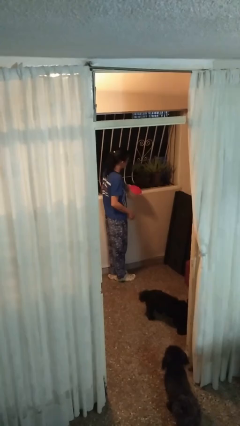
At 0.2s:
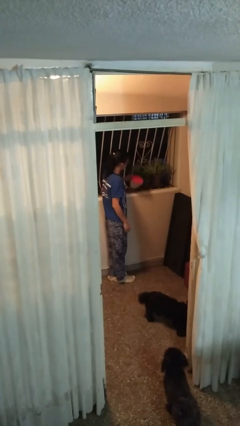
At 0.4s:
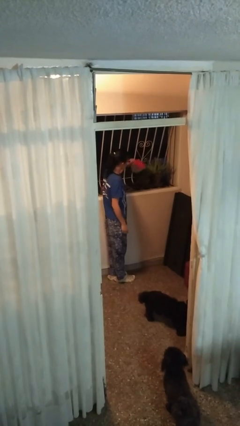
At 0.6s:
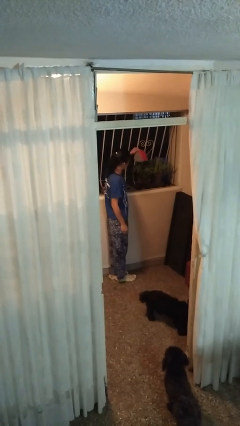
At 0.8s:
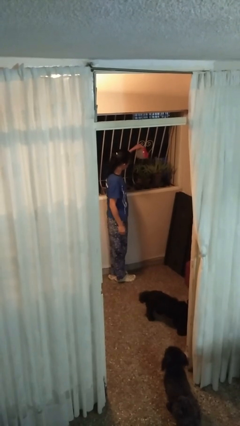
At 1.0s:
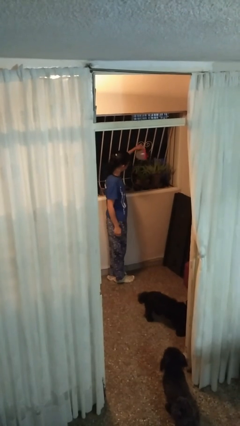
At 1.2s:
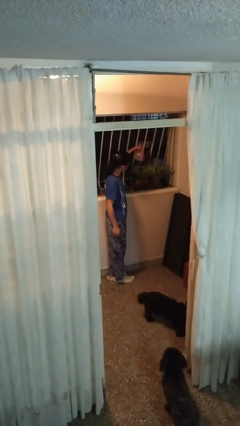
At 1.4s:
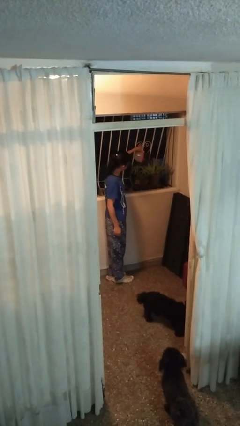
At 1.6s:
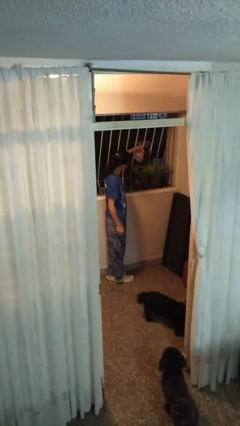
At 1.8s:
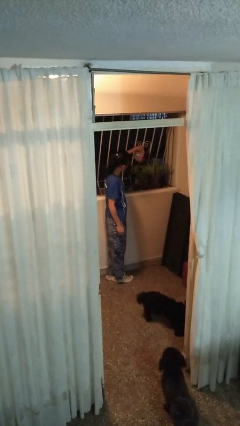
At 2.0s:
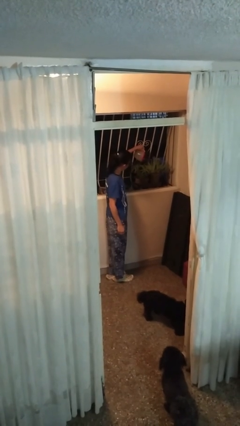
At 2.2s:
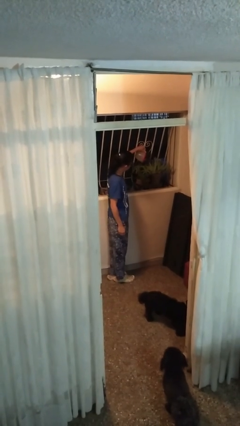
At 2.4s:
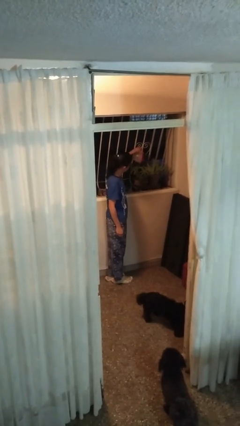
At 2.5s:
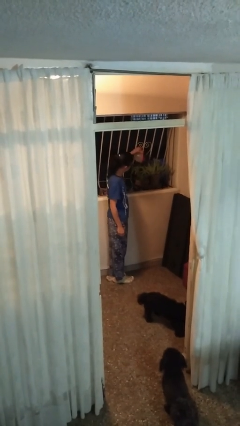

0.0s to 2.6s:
person waters houseplant

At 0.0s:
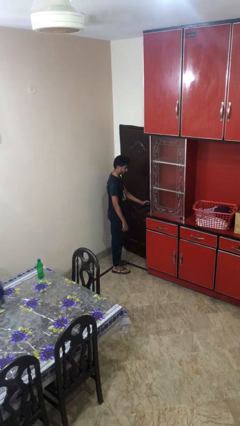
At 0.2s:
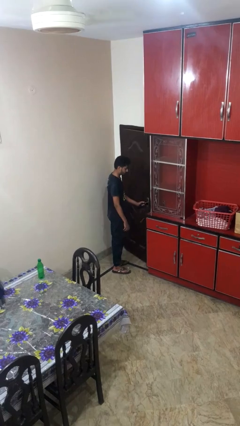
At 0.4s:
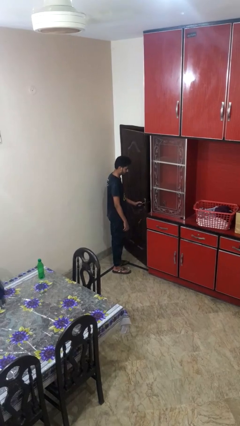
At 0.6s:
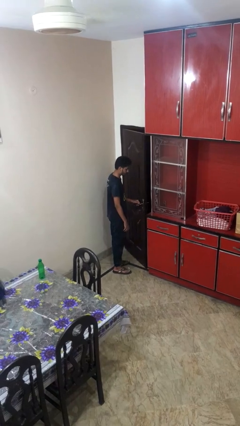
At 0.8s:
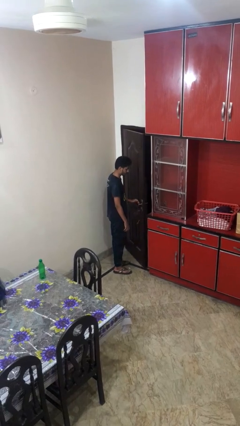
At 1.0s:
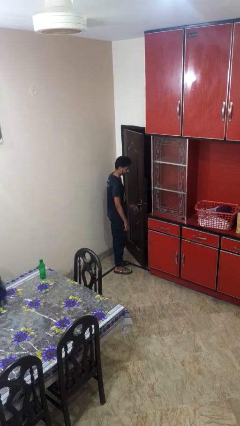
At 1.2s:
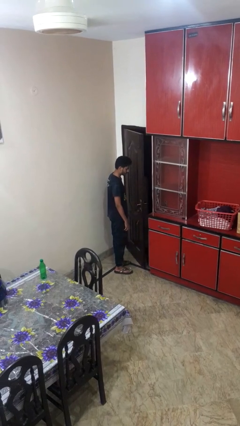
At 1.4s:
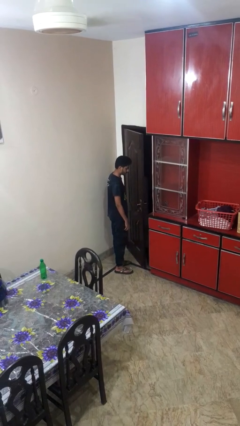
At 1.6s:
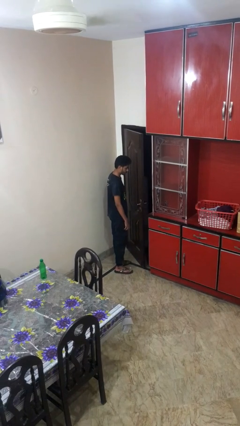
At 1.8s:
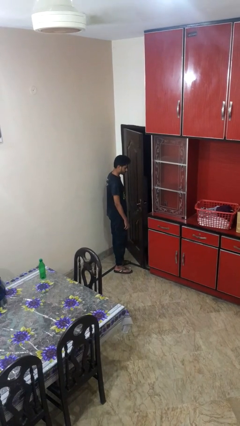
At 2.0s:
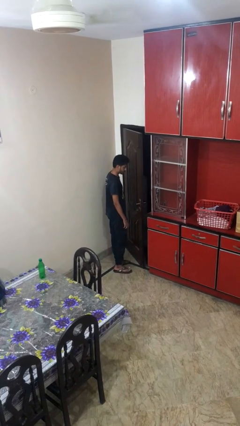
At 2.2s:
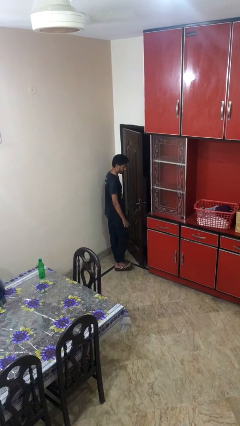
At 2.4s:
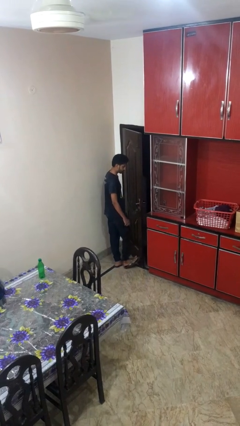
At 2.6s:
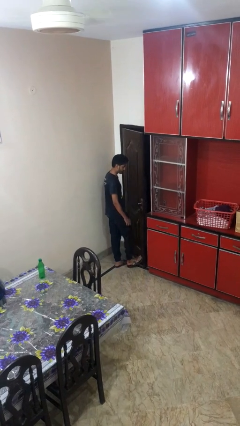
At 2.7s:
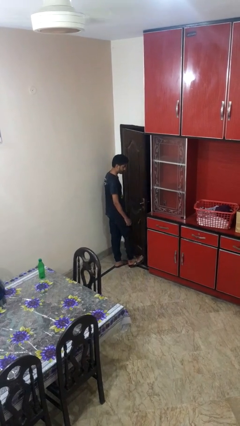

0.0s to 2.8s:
person opens facility door

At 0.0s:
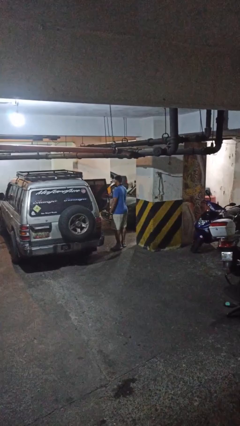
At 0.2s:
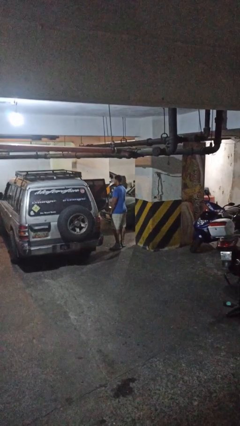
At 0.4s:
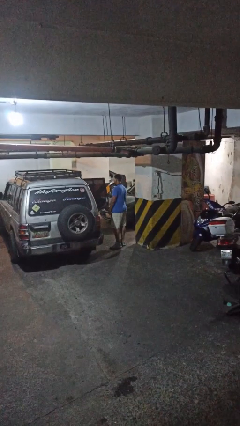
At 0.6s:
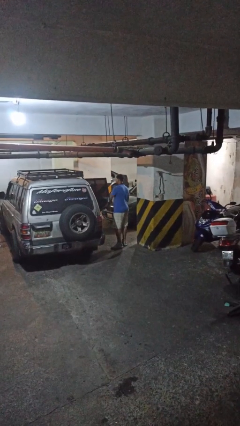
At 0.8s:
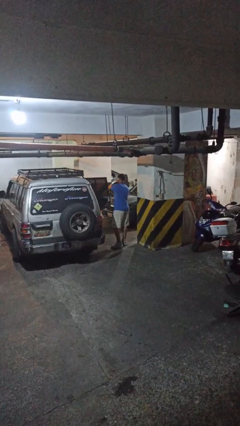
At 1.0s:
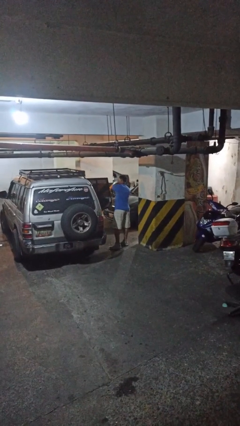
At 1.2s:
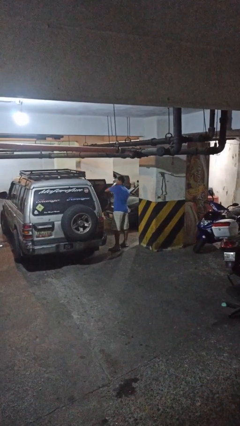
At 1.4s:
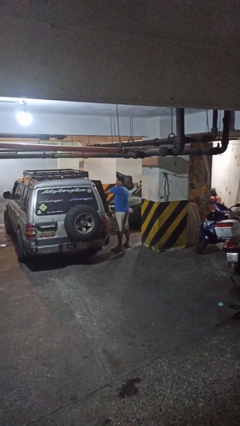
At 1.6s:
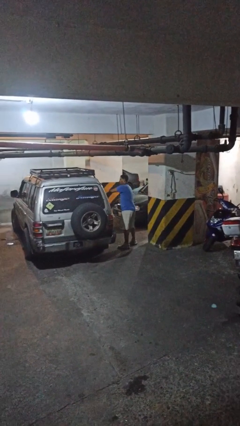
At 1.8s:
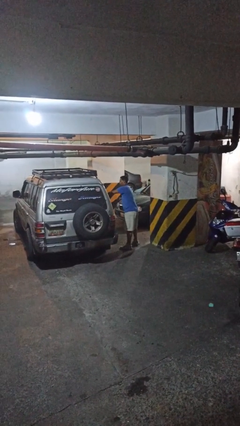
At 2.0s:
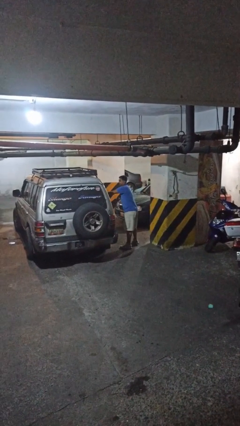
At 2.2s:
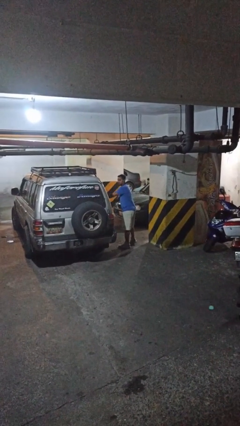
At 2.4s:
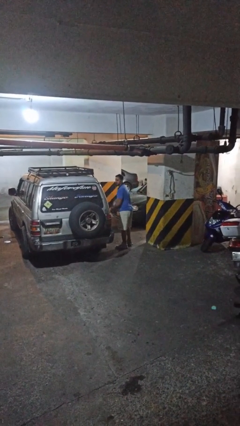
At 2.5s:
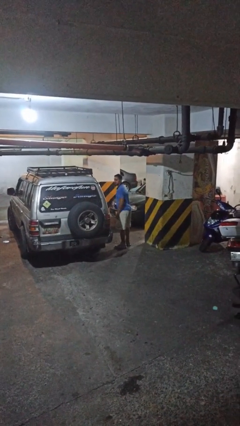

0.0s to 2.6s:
person closes car door

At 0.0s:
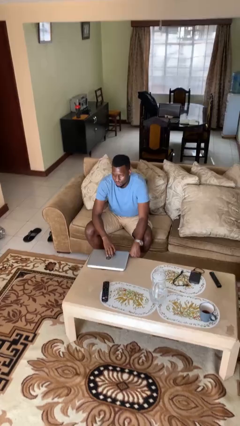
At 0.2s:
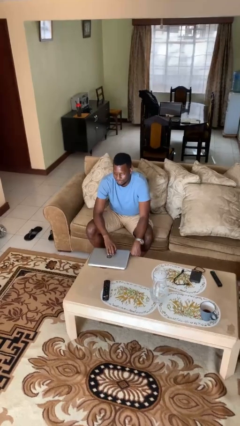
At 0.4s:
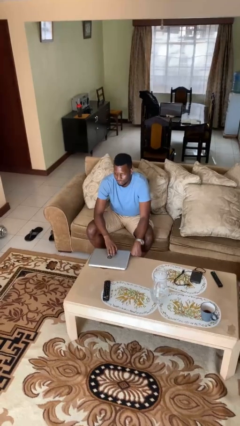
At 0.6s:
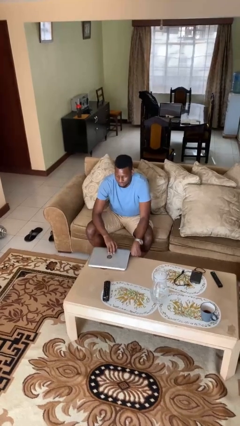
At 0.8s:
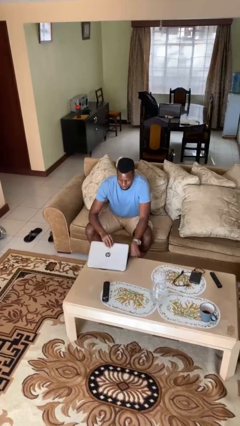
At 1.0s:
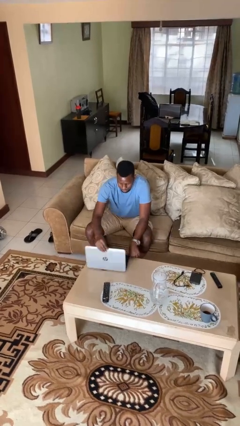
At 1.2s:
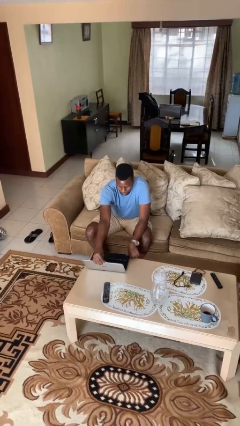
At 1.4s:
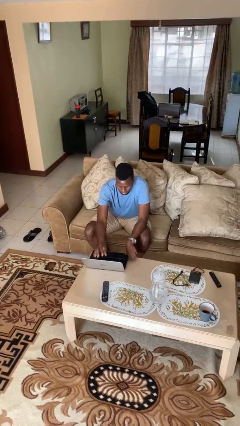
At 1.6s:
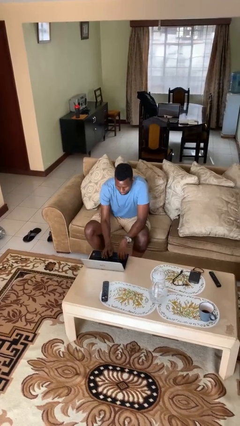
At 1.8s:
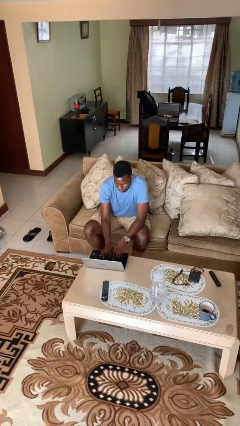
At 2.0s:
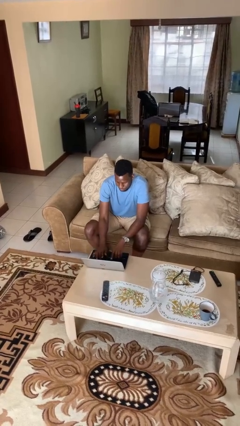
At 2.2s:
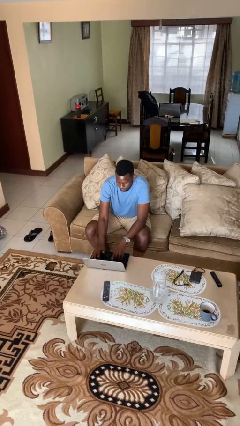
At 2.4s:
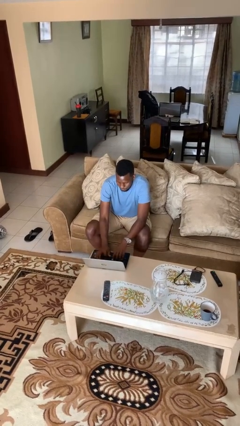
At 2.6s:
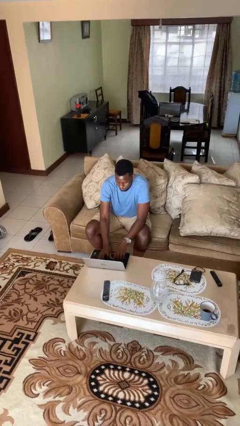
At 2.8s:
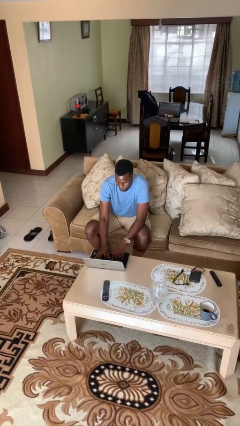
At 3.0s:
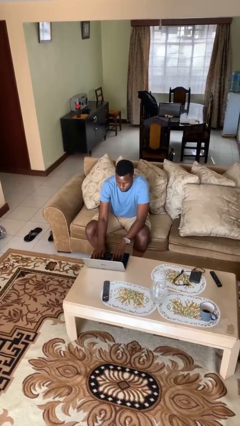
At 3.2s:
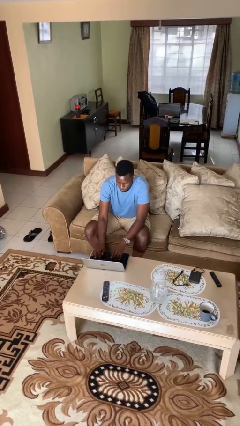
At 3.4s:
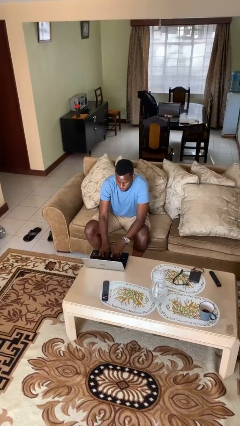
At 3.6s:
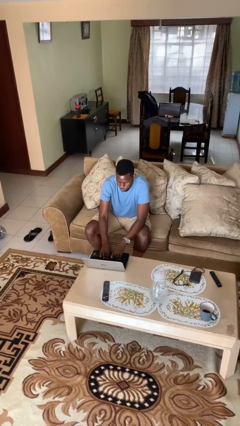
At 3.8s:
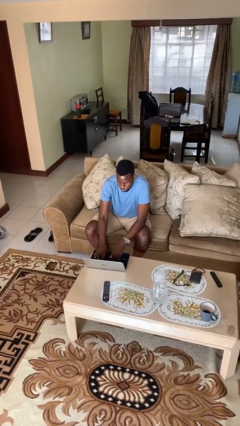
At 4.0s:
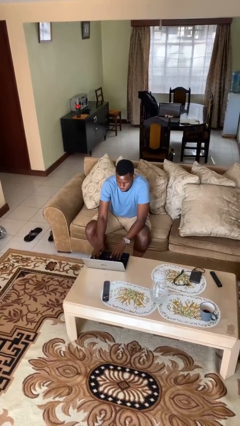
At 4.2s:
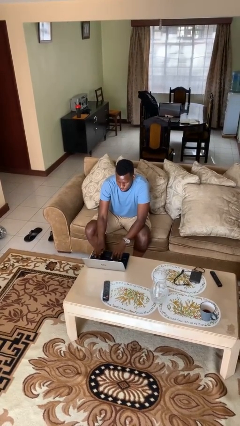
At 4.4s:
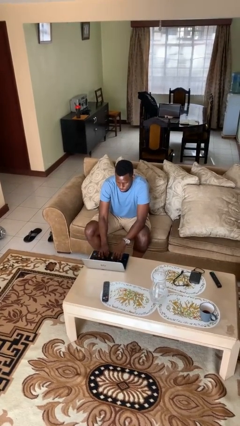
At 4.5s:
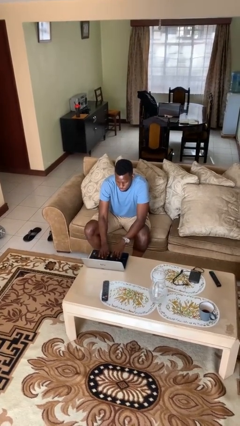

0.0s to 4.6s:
person interacts with laptop

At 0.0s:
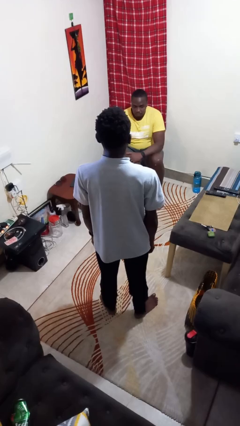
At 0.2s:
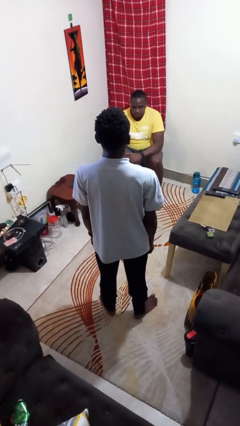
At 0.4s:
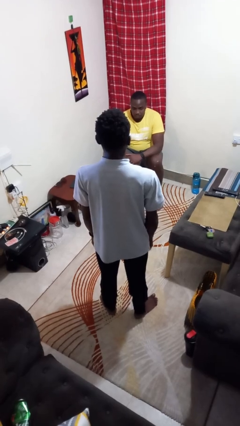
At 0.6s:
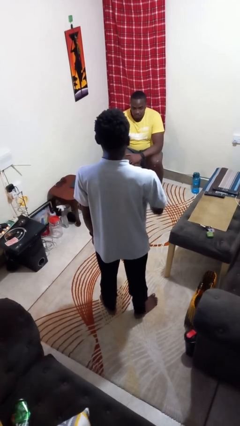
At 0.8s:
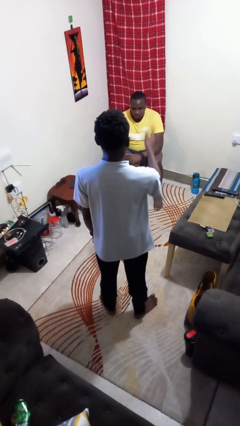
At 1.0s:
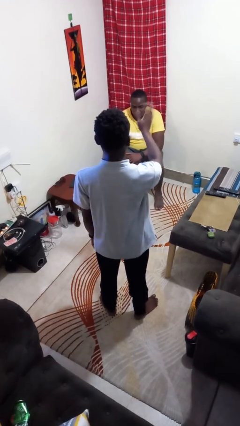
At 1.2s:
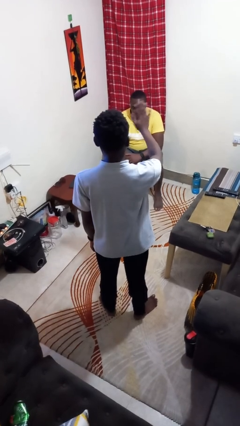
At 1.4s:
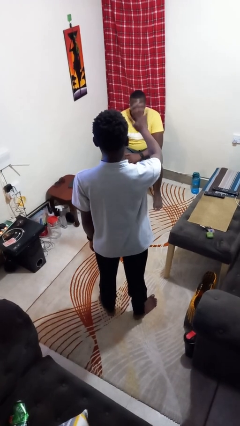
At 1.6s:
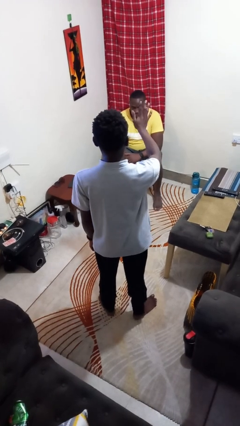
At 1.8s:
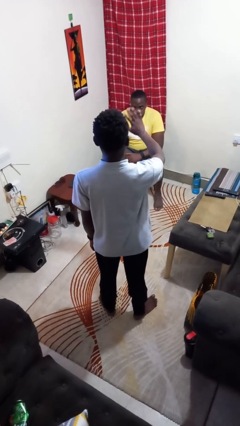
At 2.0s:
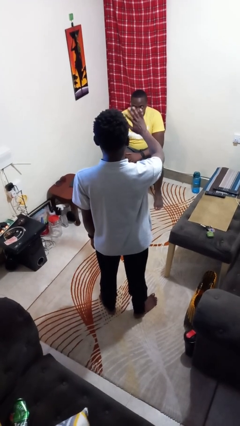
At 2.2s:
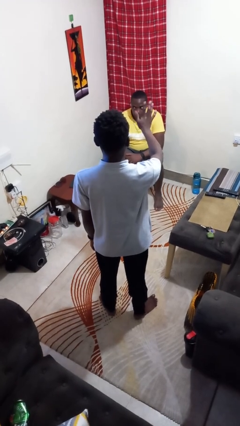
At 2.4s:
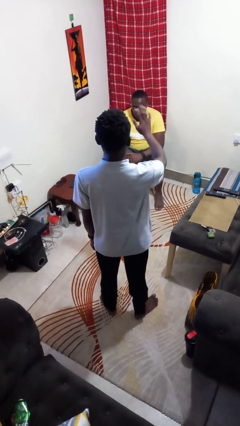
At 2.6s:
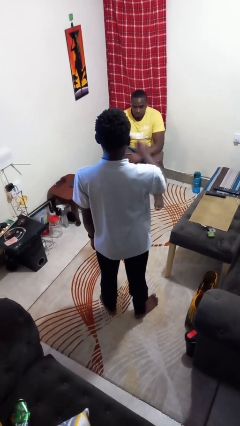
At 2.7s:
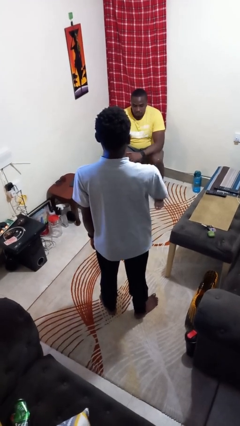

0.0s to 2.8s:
person waves at person

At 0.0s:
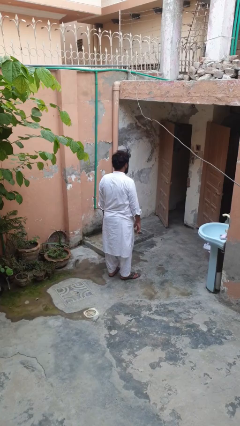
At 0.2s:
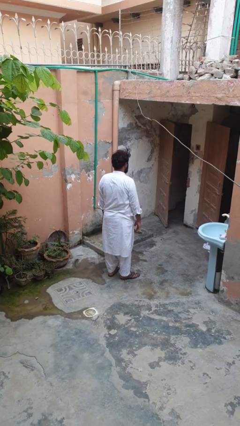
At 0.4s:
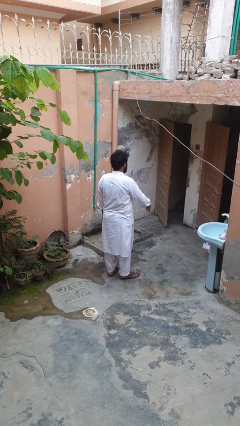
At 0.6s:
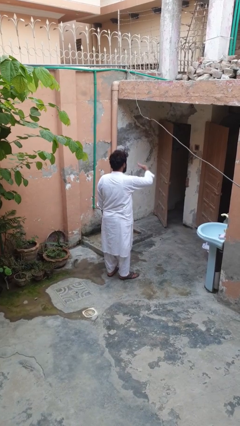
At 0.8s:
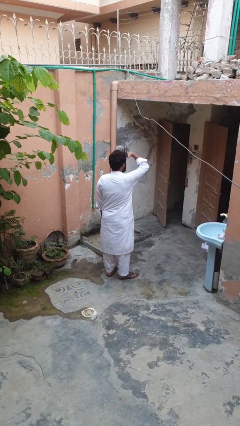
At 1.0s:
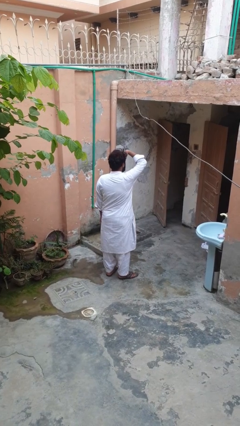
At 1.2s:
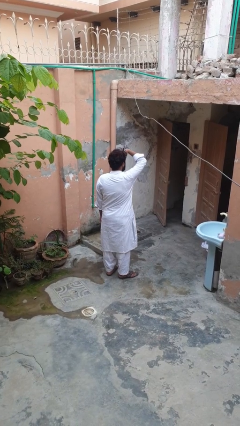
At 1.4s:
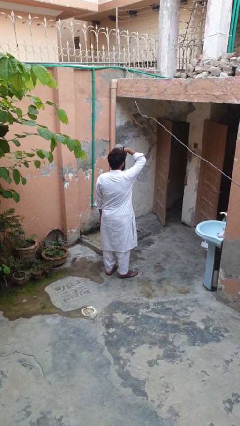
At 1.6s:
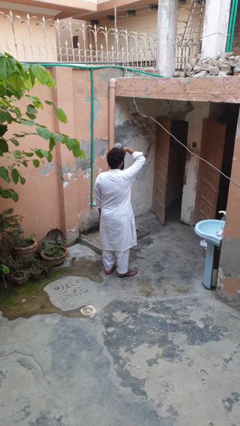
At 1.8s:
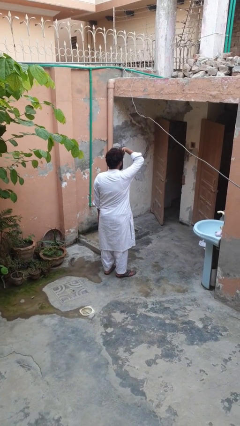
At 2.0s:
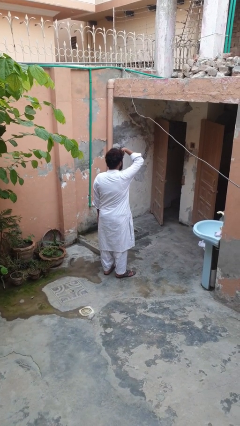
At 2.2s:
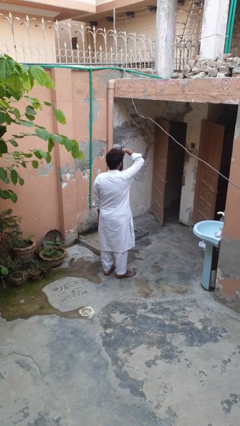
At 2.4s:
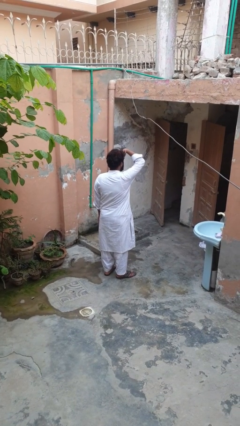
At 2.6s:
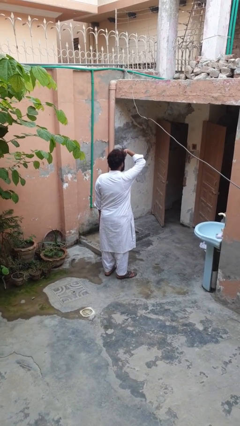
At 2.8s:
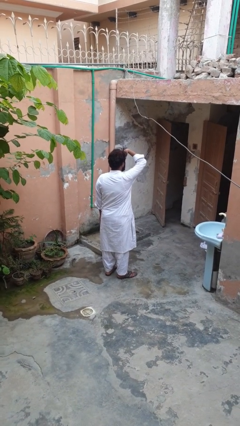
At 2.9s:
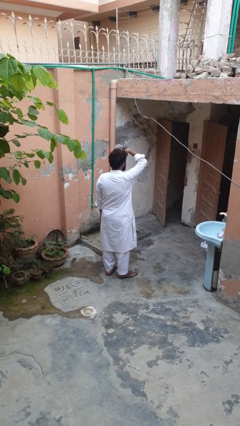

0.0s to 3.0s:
person shades eyes
